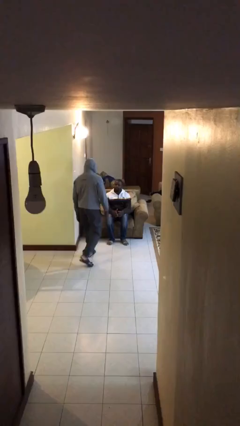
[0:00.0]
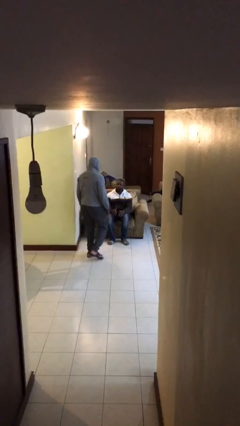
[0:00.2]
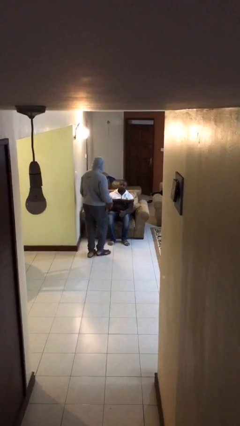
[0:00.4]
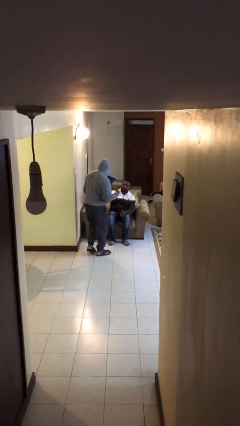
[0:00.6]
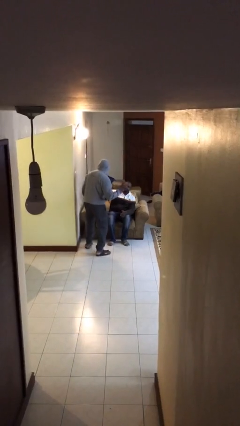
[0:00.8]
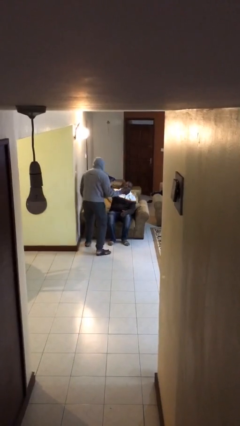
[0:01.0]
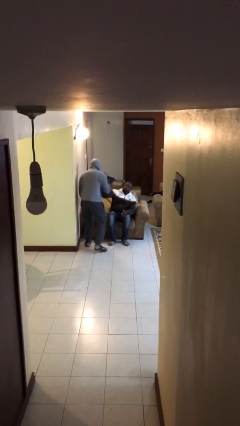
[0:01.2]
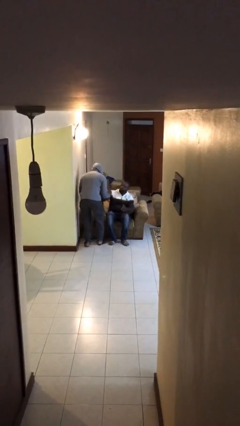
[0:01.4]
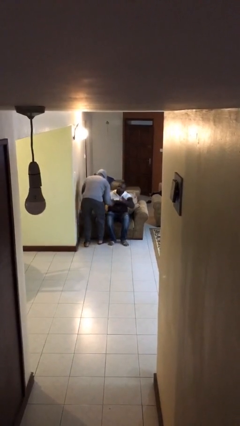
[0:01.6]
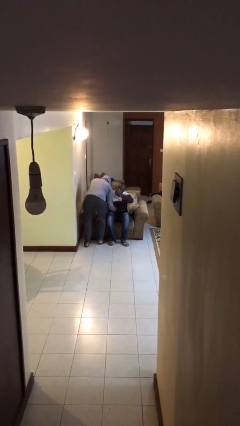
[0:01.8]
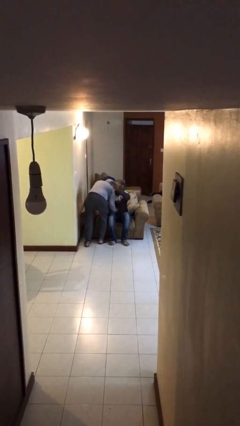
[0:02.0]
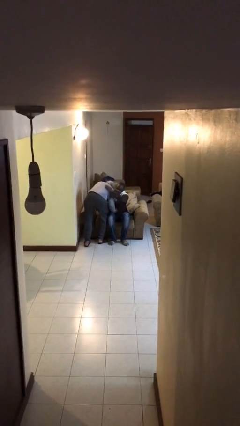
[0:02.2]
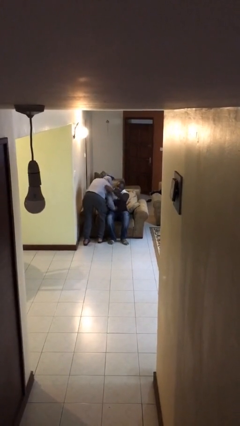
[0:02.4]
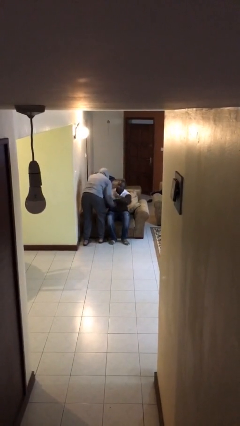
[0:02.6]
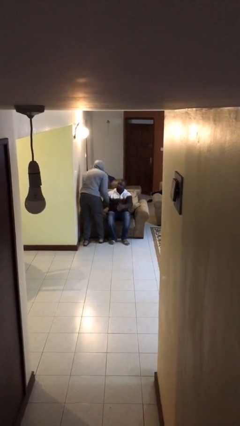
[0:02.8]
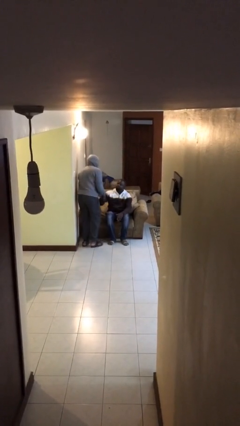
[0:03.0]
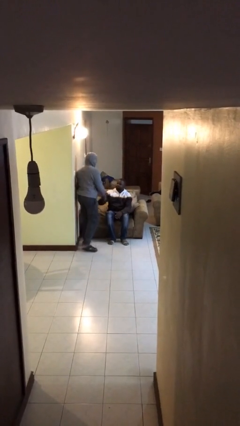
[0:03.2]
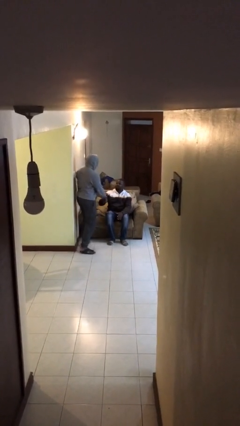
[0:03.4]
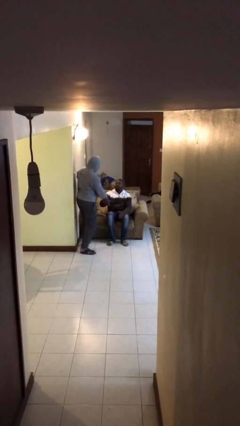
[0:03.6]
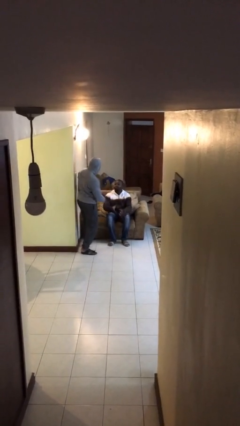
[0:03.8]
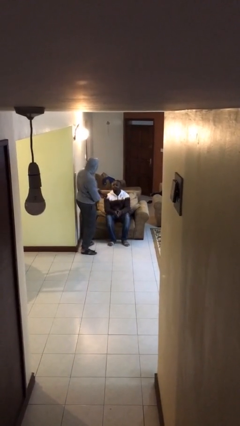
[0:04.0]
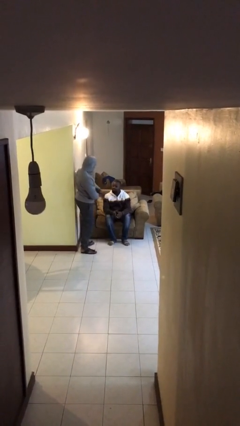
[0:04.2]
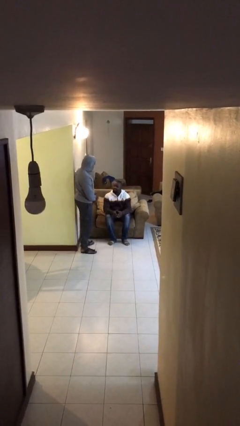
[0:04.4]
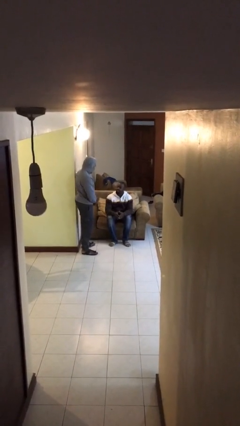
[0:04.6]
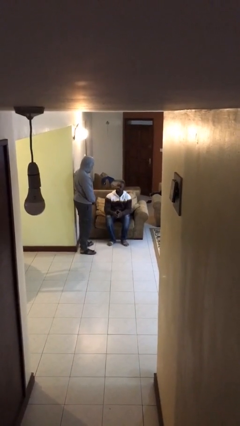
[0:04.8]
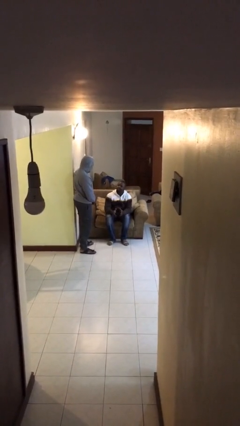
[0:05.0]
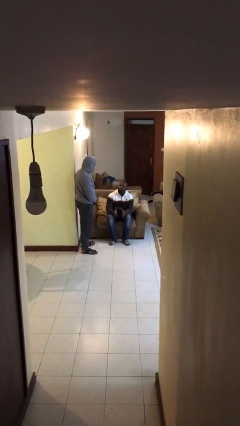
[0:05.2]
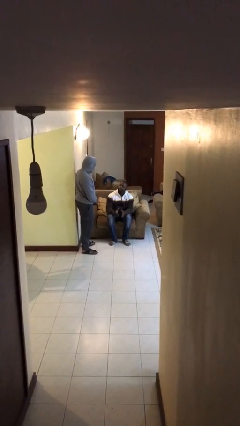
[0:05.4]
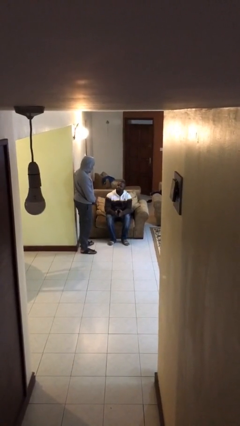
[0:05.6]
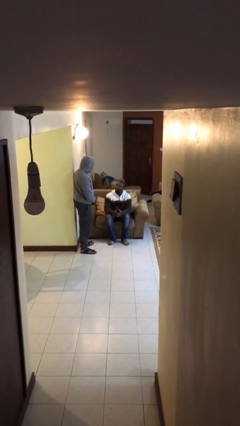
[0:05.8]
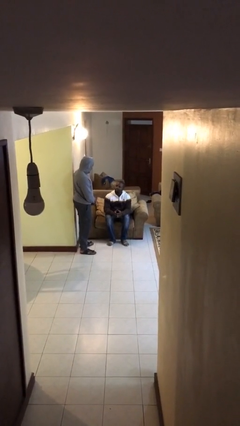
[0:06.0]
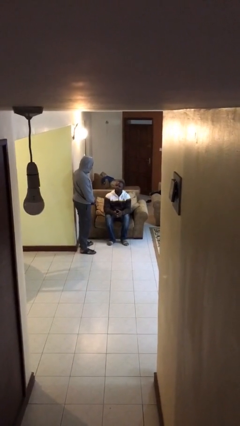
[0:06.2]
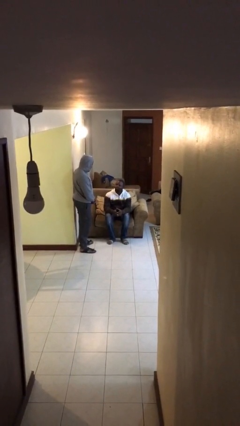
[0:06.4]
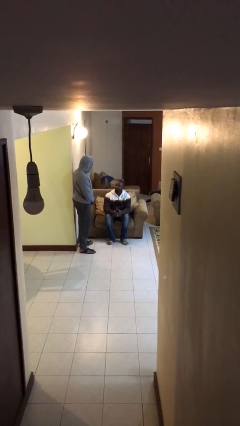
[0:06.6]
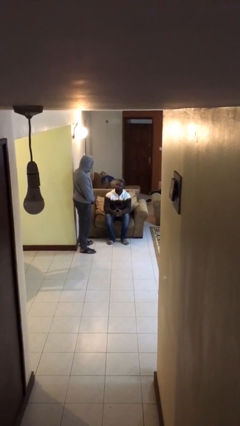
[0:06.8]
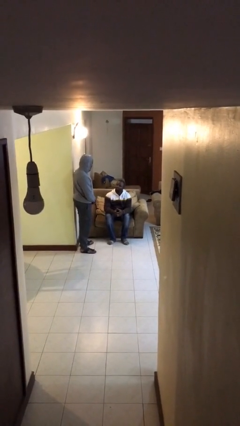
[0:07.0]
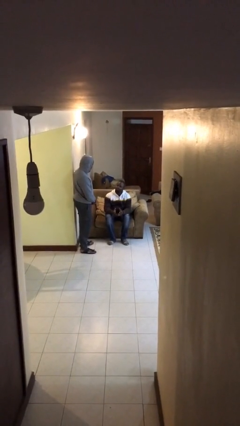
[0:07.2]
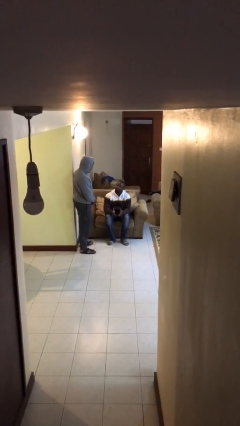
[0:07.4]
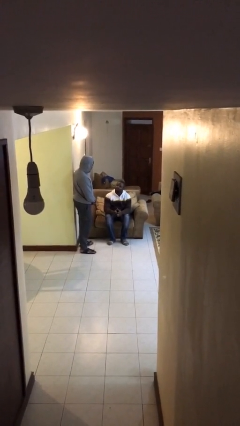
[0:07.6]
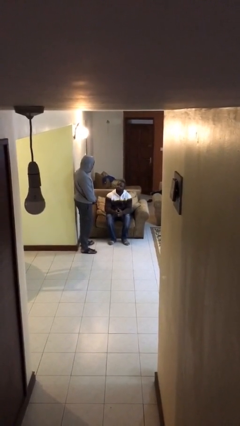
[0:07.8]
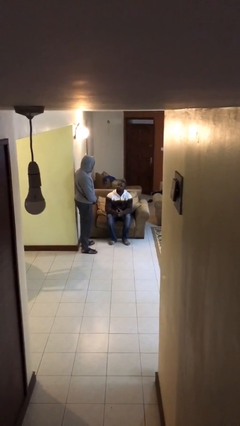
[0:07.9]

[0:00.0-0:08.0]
person embraces person

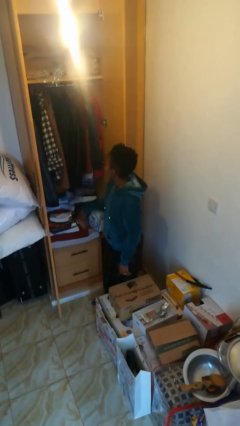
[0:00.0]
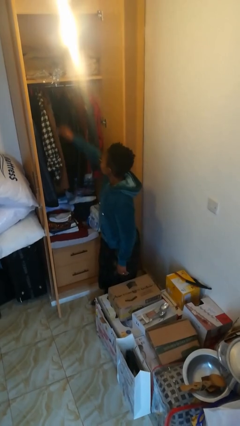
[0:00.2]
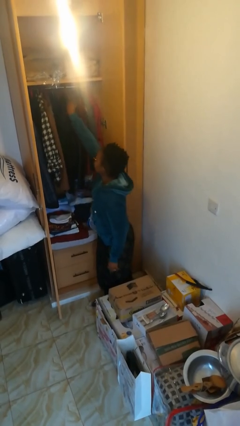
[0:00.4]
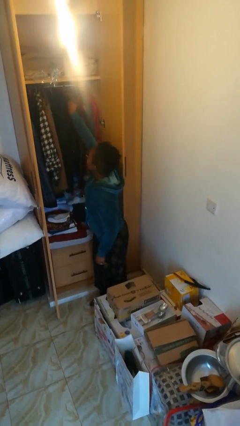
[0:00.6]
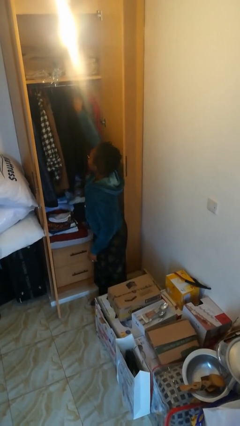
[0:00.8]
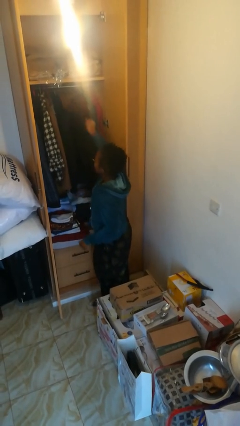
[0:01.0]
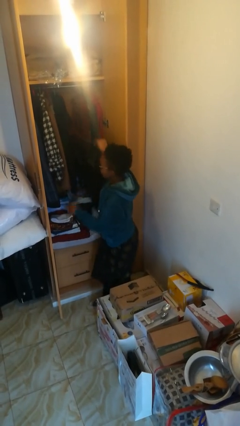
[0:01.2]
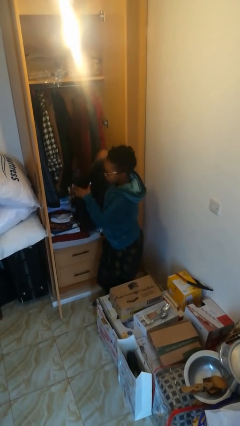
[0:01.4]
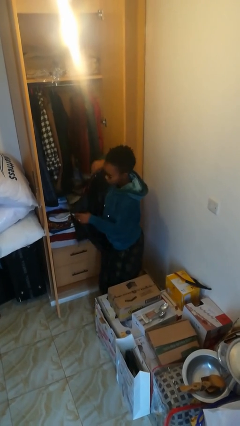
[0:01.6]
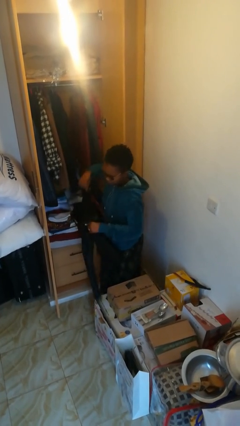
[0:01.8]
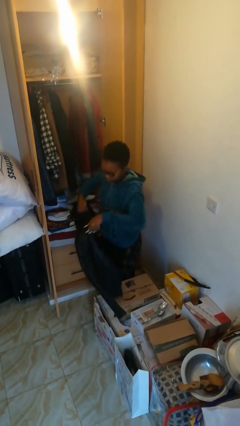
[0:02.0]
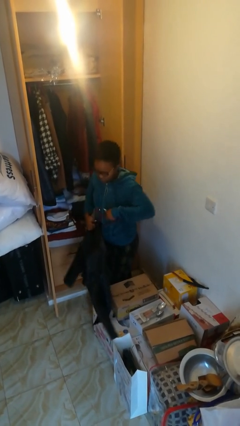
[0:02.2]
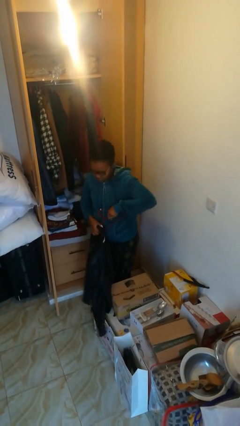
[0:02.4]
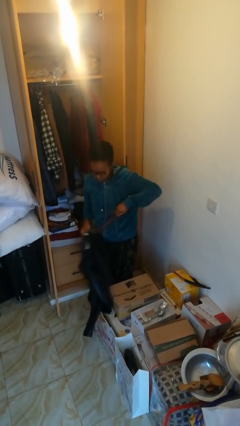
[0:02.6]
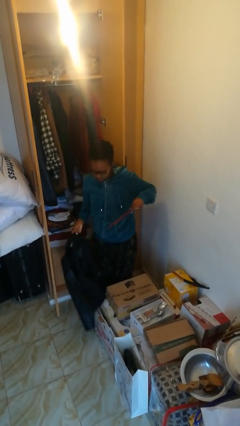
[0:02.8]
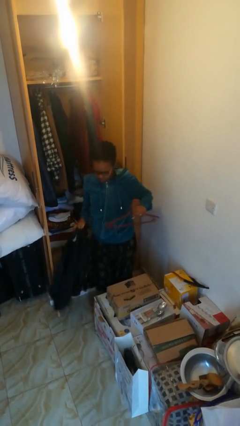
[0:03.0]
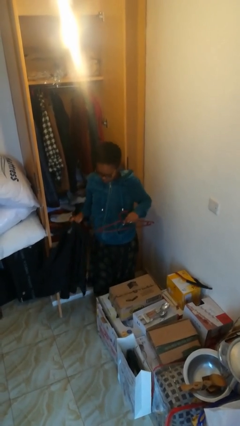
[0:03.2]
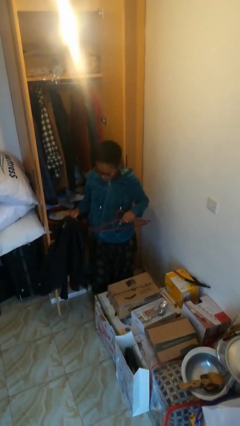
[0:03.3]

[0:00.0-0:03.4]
person takes clothes from closet

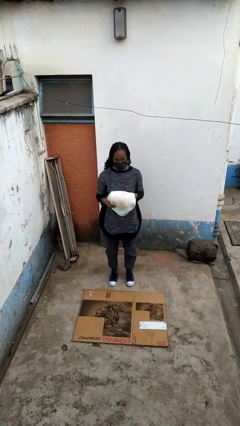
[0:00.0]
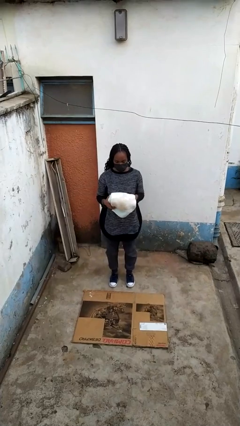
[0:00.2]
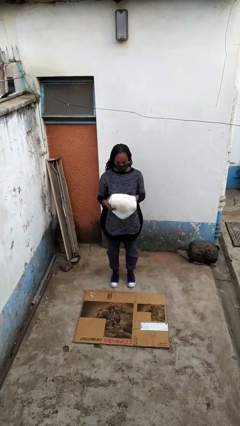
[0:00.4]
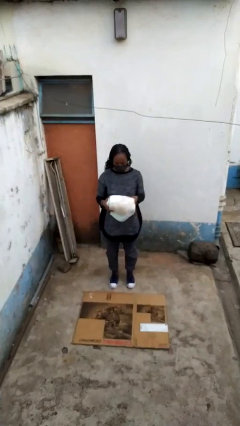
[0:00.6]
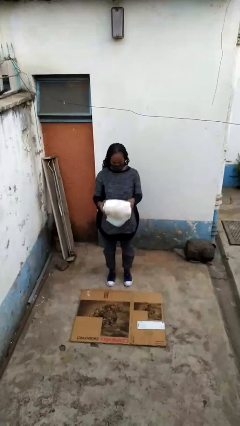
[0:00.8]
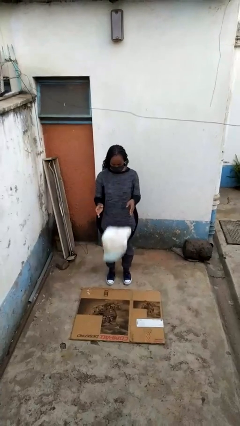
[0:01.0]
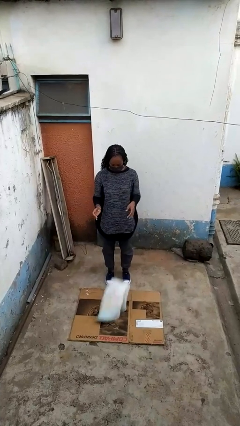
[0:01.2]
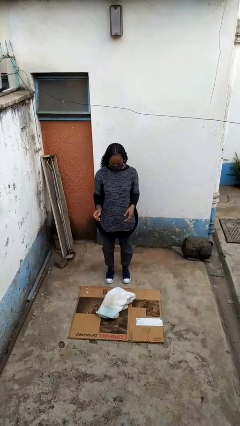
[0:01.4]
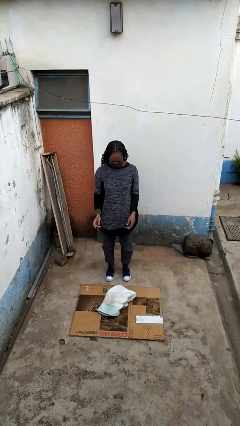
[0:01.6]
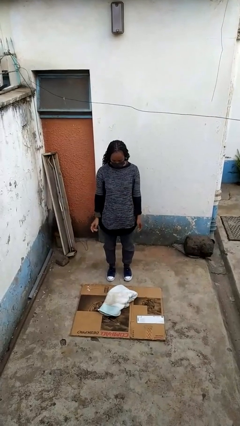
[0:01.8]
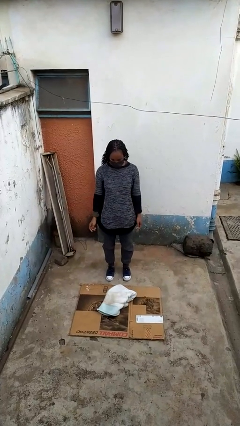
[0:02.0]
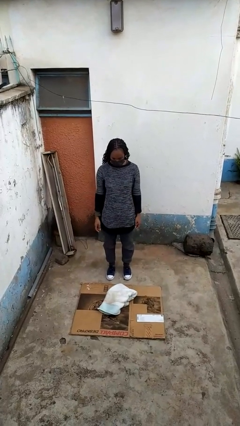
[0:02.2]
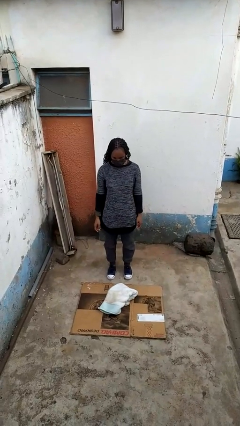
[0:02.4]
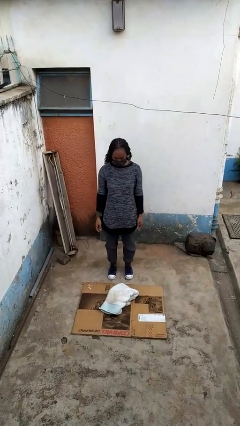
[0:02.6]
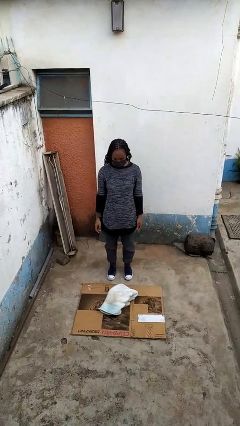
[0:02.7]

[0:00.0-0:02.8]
person drops object

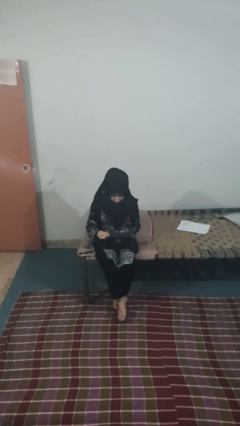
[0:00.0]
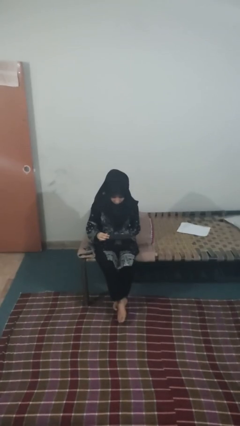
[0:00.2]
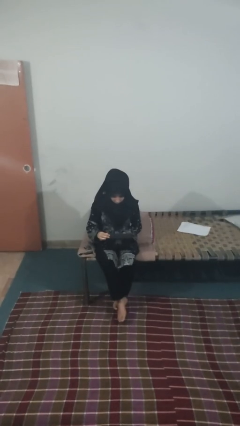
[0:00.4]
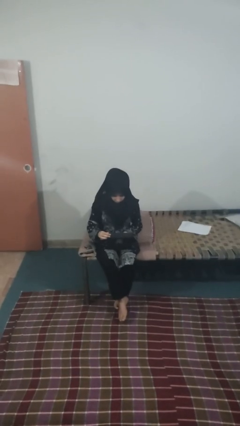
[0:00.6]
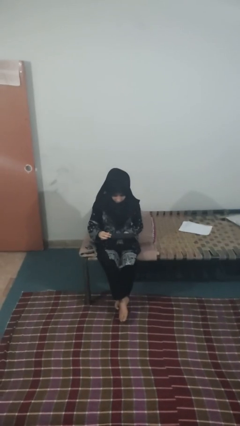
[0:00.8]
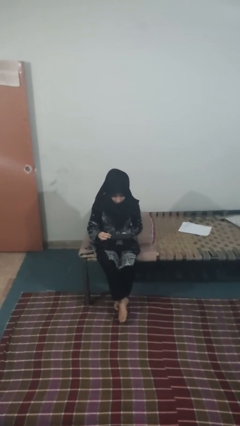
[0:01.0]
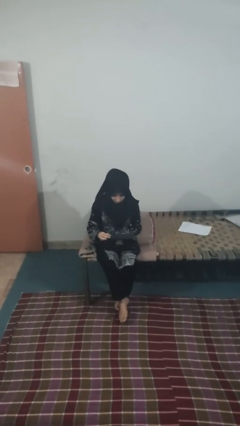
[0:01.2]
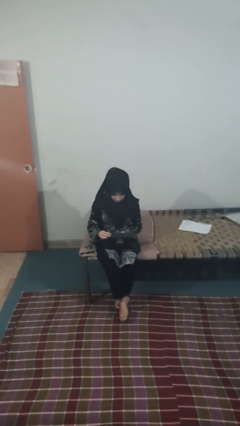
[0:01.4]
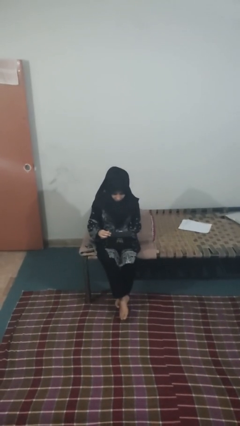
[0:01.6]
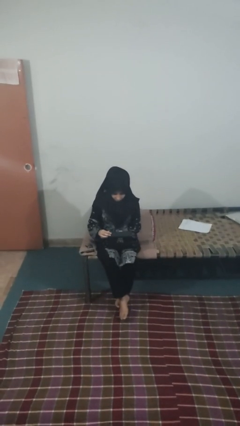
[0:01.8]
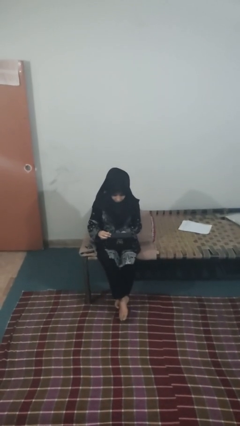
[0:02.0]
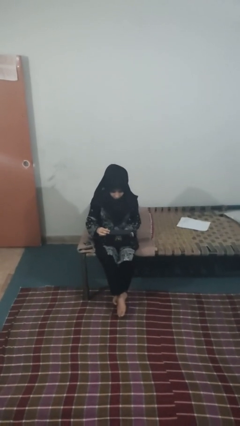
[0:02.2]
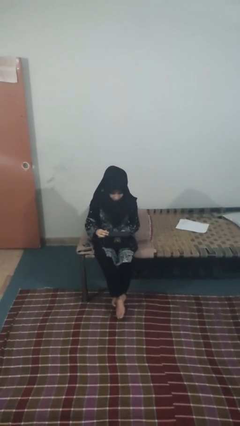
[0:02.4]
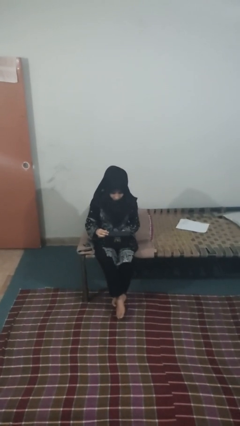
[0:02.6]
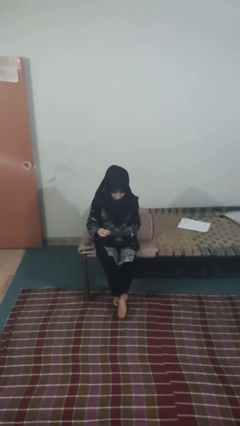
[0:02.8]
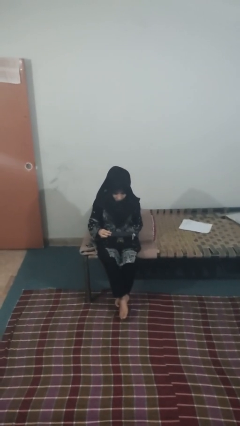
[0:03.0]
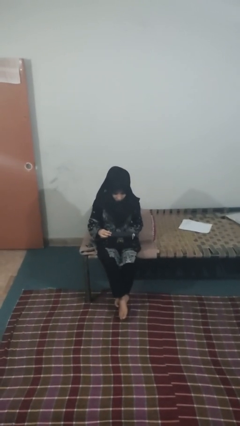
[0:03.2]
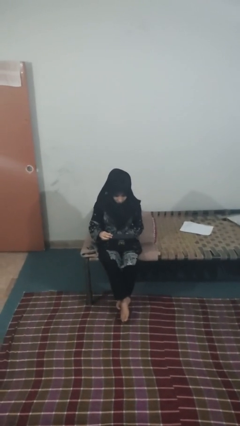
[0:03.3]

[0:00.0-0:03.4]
person searches jewelry box

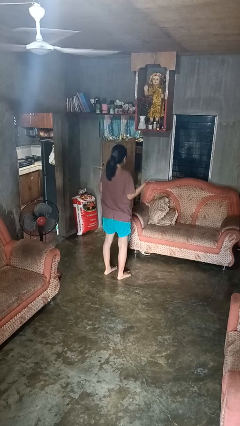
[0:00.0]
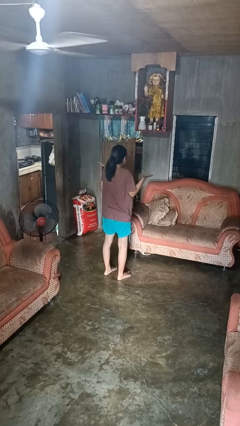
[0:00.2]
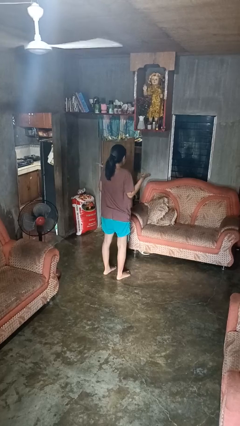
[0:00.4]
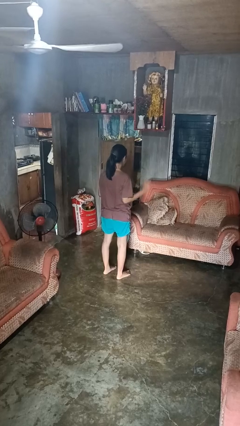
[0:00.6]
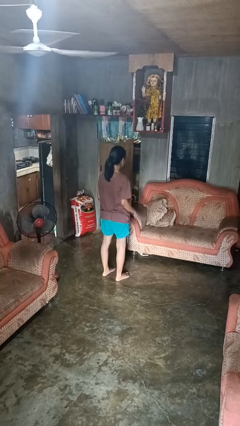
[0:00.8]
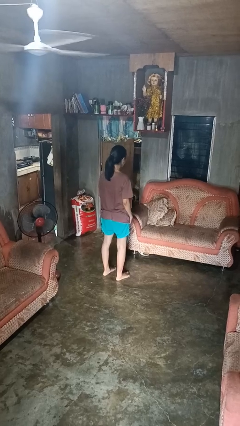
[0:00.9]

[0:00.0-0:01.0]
person shrugs
